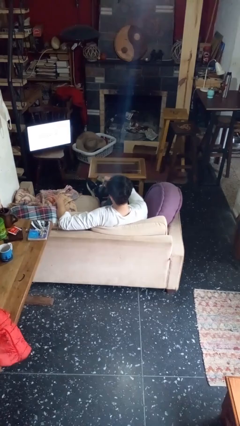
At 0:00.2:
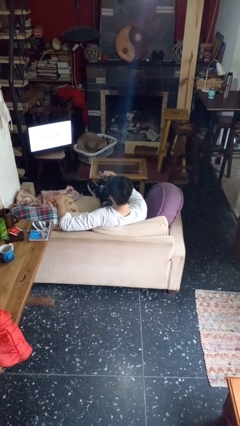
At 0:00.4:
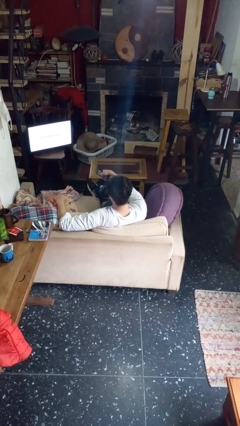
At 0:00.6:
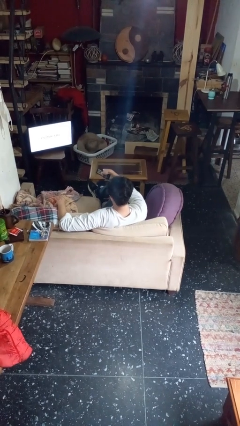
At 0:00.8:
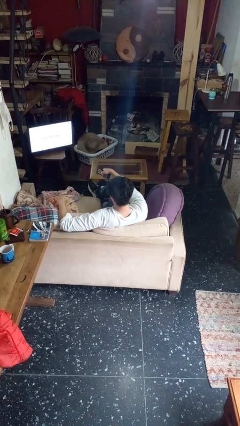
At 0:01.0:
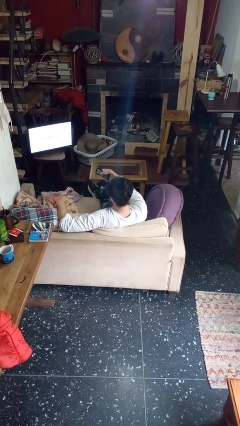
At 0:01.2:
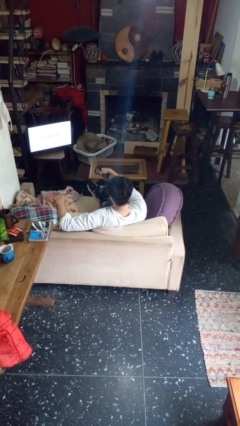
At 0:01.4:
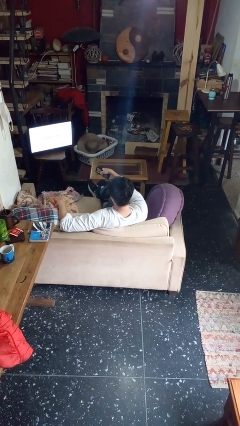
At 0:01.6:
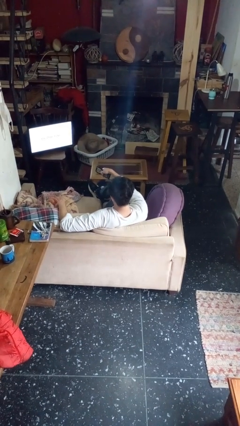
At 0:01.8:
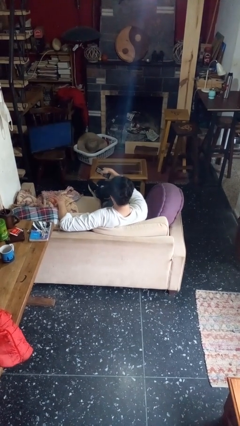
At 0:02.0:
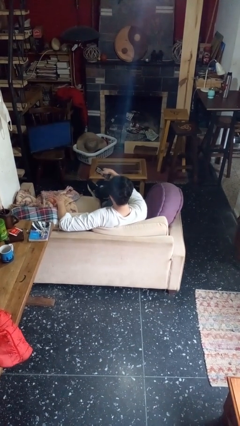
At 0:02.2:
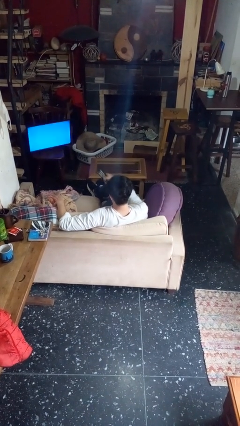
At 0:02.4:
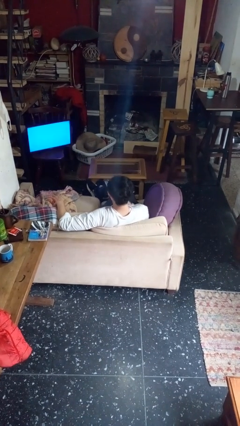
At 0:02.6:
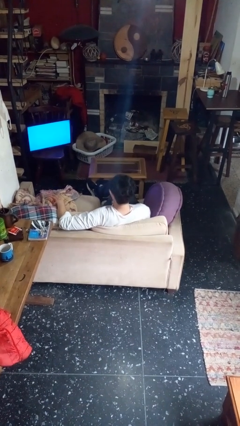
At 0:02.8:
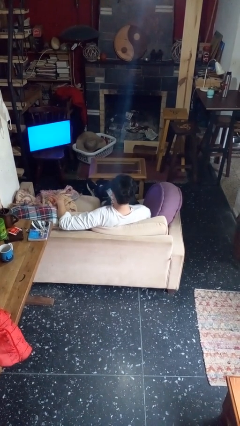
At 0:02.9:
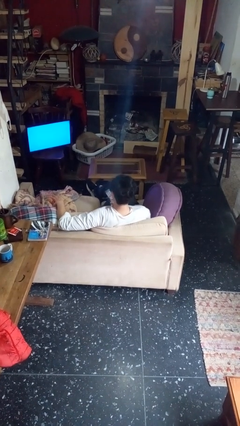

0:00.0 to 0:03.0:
person uses television remote

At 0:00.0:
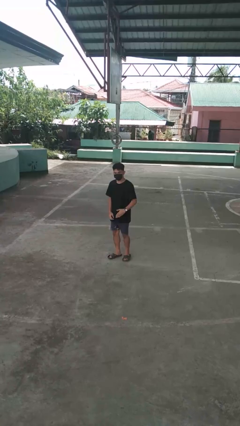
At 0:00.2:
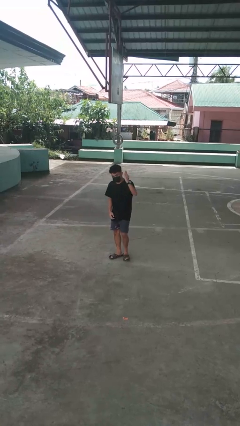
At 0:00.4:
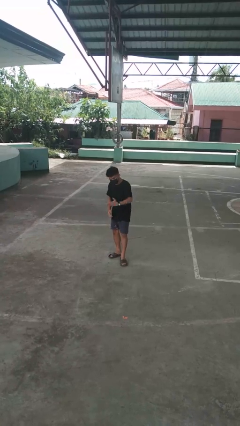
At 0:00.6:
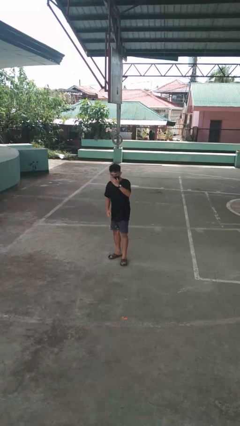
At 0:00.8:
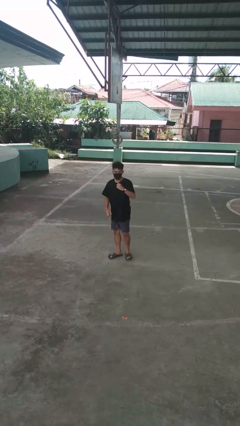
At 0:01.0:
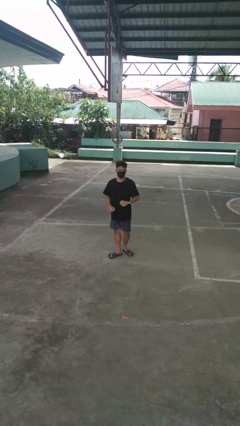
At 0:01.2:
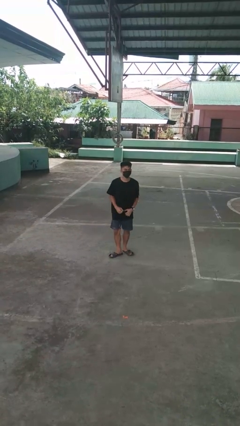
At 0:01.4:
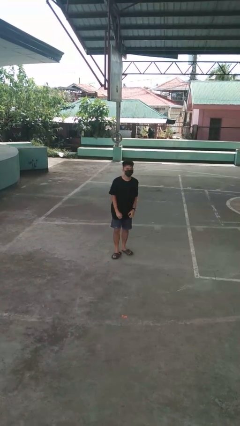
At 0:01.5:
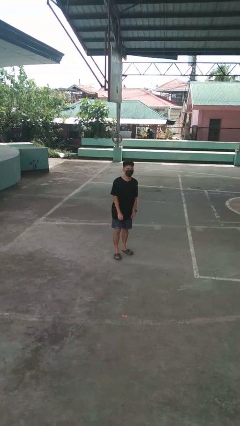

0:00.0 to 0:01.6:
person karate chop

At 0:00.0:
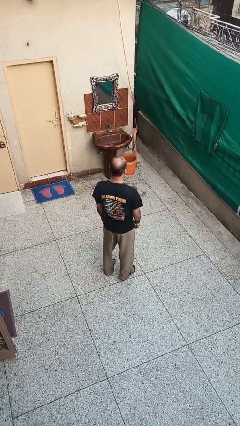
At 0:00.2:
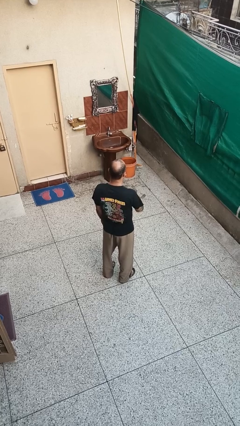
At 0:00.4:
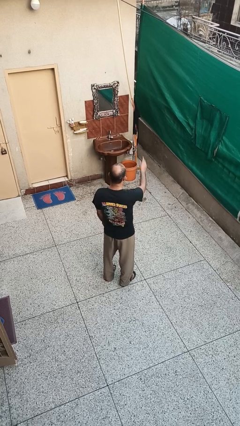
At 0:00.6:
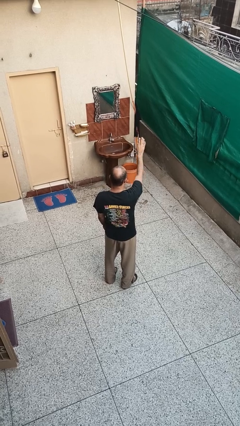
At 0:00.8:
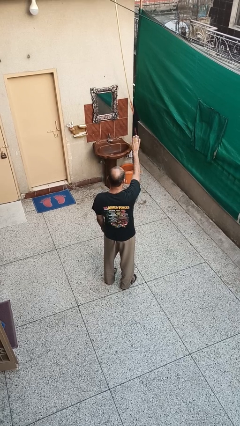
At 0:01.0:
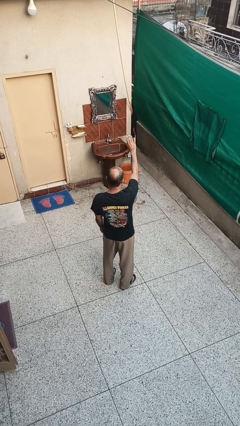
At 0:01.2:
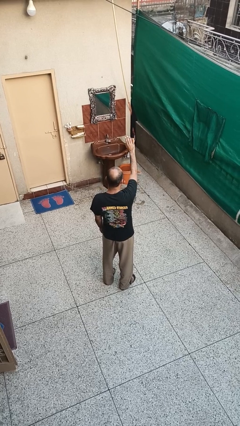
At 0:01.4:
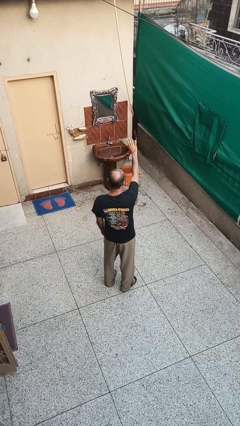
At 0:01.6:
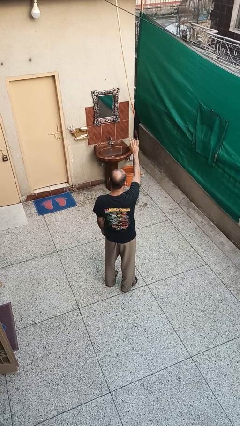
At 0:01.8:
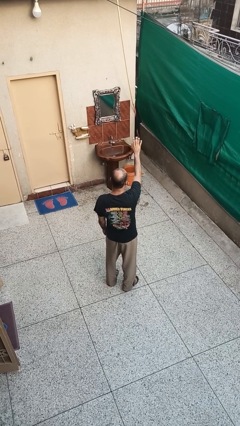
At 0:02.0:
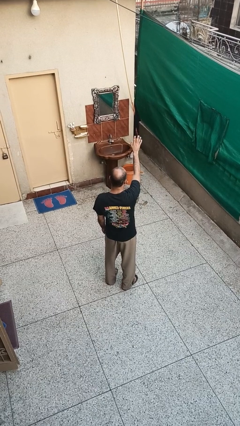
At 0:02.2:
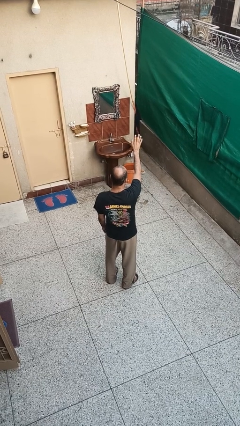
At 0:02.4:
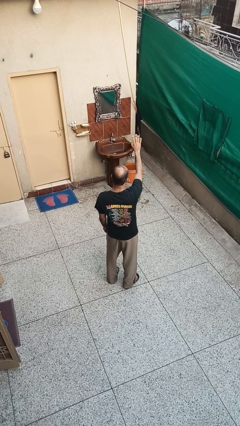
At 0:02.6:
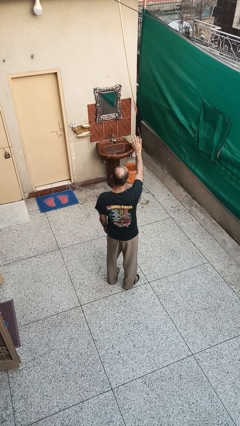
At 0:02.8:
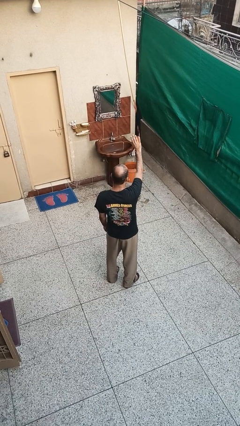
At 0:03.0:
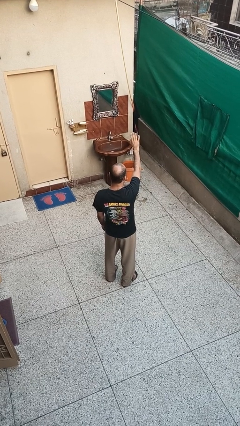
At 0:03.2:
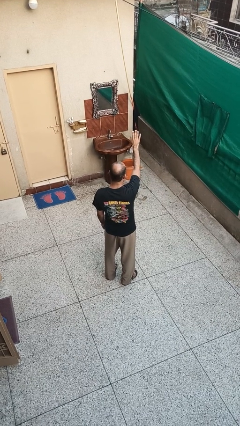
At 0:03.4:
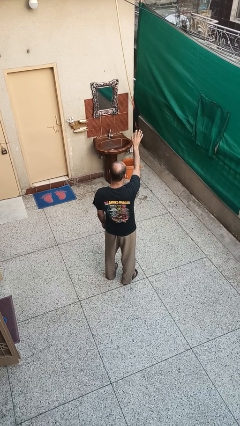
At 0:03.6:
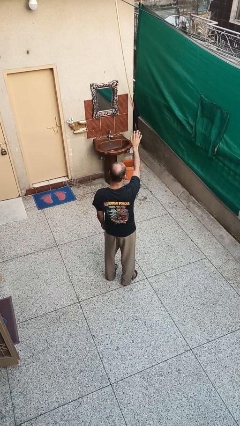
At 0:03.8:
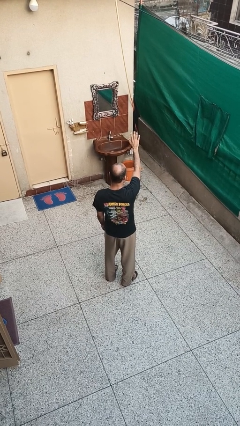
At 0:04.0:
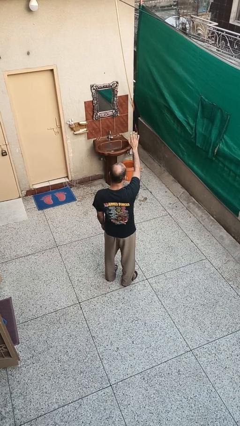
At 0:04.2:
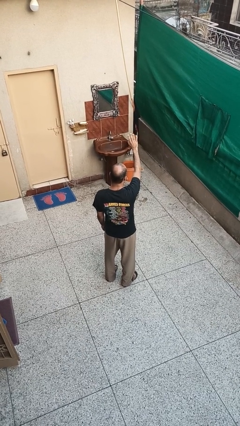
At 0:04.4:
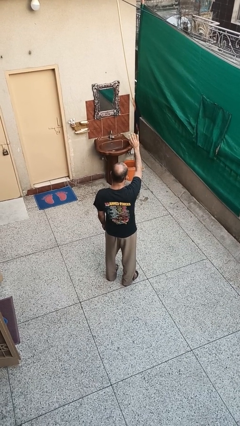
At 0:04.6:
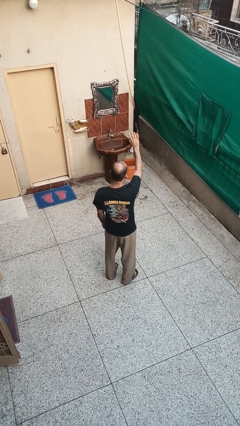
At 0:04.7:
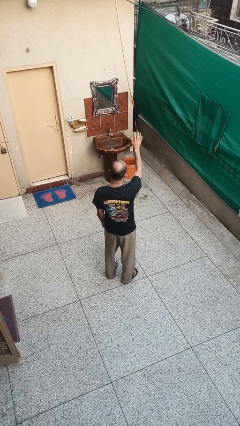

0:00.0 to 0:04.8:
person waves at person

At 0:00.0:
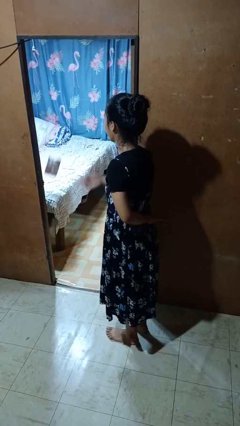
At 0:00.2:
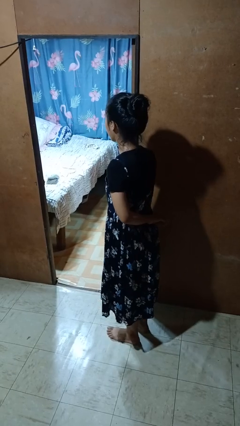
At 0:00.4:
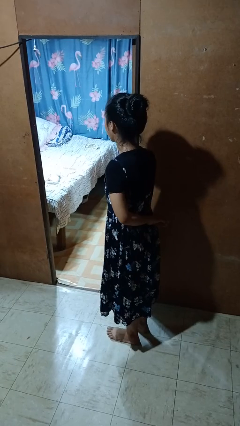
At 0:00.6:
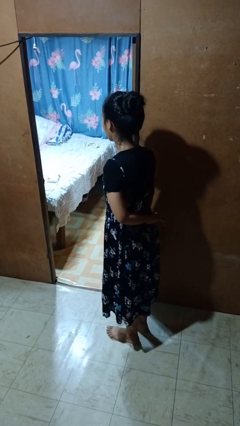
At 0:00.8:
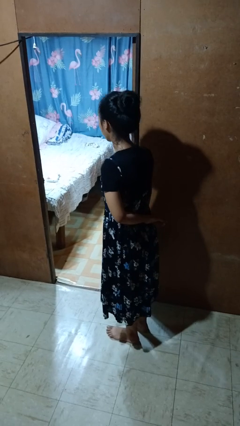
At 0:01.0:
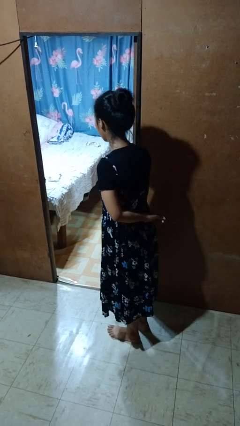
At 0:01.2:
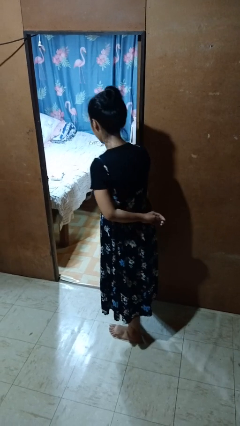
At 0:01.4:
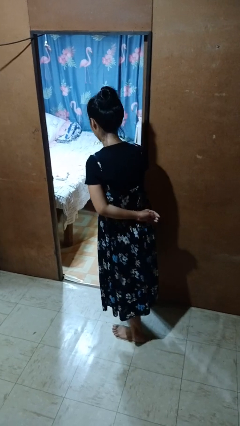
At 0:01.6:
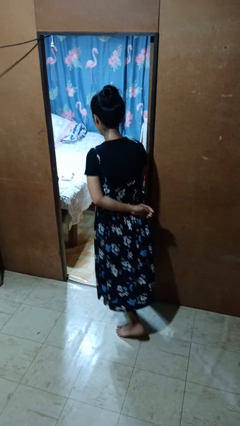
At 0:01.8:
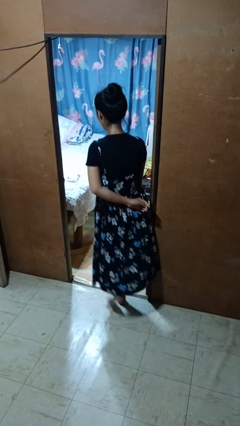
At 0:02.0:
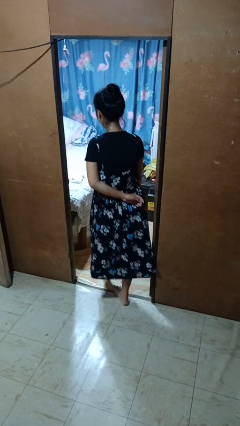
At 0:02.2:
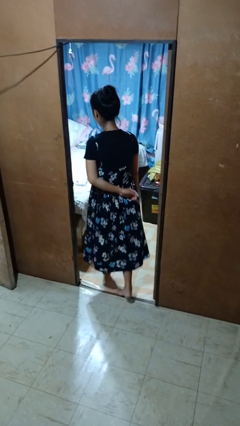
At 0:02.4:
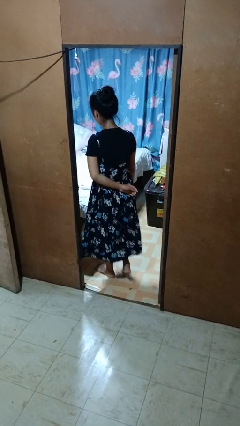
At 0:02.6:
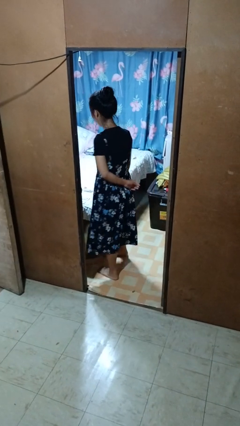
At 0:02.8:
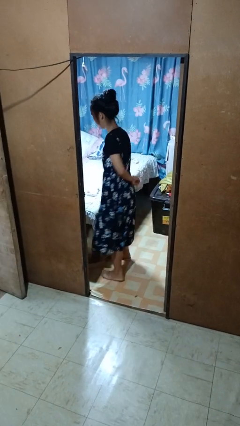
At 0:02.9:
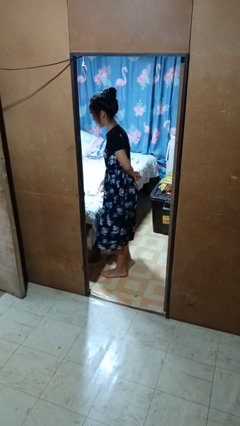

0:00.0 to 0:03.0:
person throws object on bed

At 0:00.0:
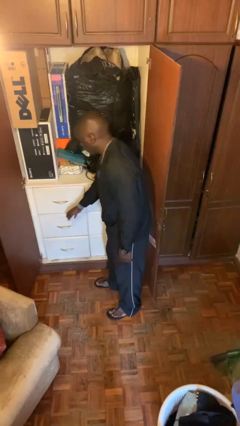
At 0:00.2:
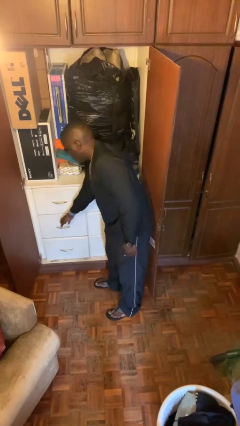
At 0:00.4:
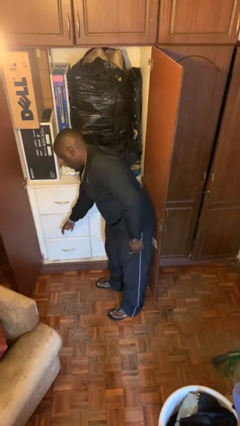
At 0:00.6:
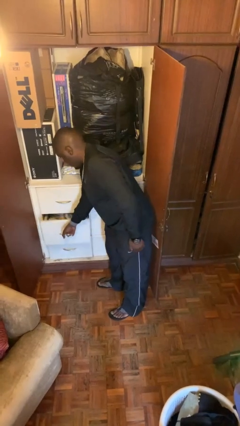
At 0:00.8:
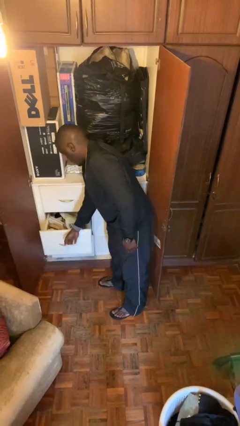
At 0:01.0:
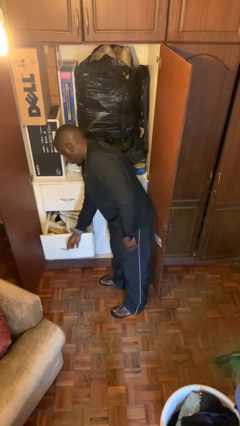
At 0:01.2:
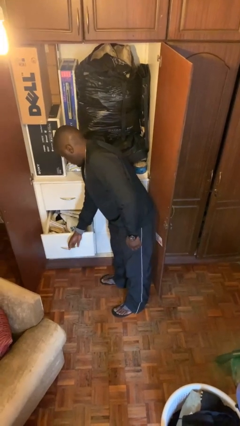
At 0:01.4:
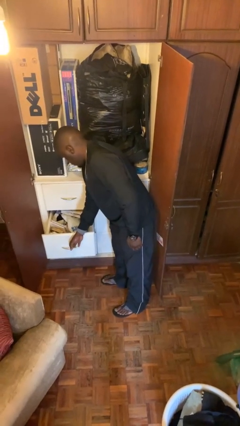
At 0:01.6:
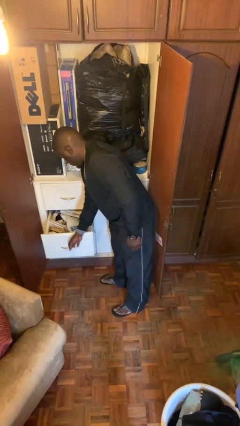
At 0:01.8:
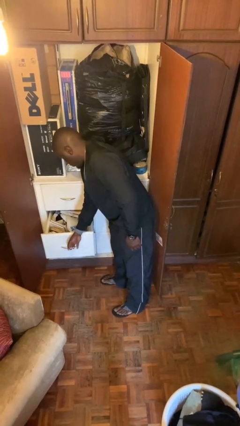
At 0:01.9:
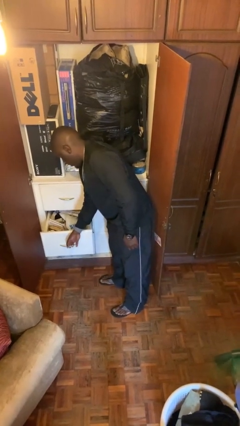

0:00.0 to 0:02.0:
person opens dresser drawer

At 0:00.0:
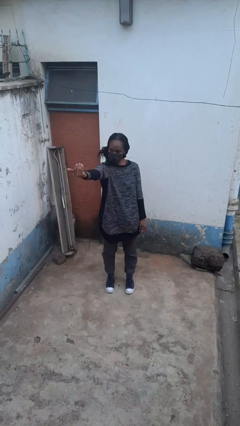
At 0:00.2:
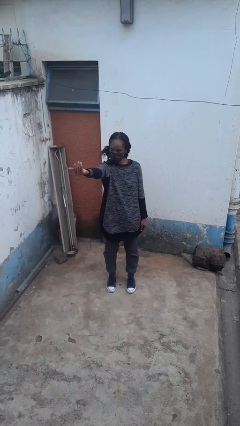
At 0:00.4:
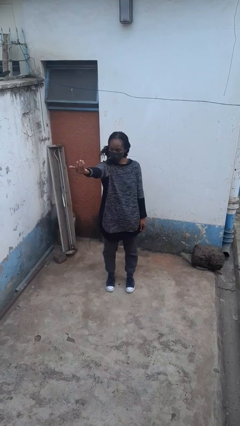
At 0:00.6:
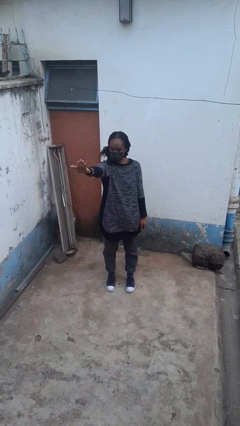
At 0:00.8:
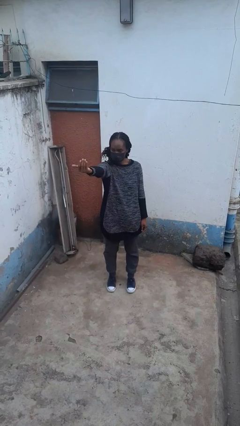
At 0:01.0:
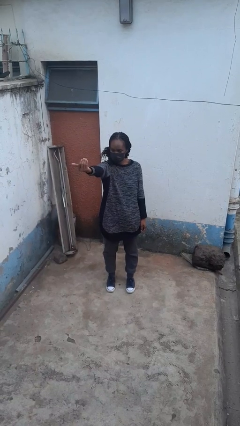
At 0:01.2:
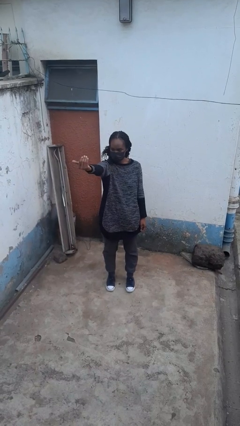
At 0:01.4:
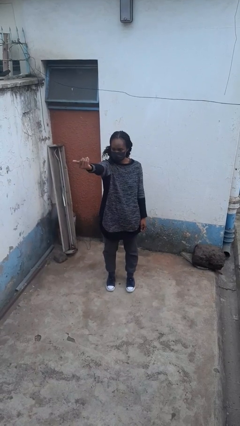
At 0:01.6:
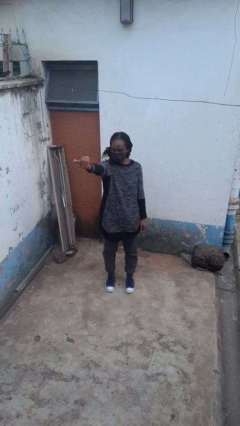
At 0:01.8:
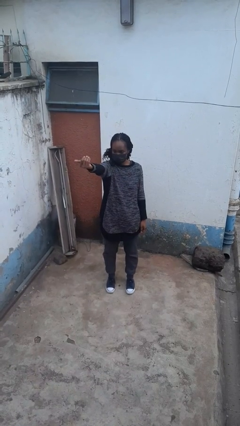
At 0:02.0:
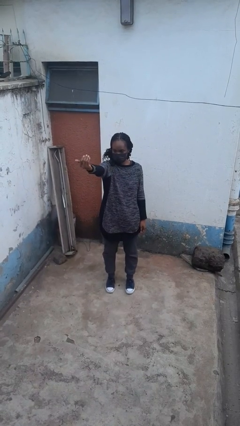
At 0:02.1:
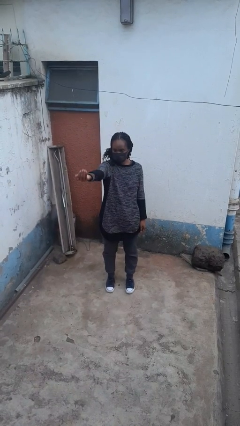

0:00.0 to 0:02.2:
person gestures come here

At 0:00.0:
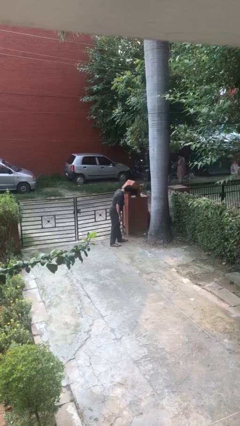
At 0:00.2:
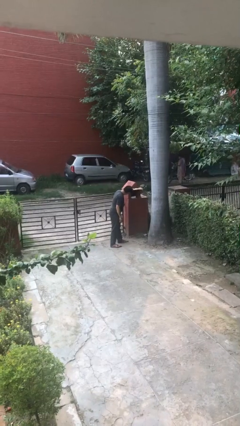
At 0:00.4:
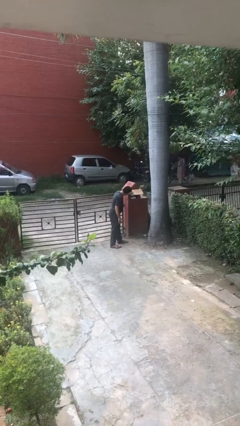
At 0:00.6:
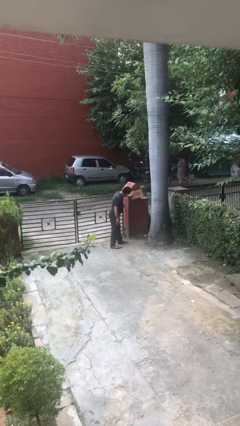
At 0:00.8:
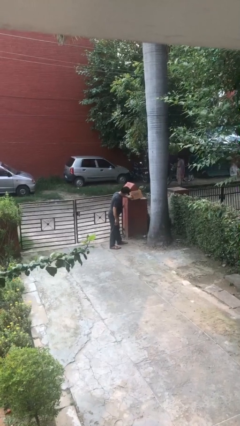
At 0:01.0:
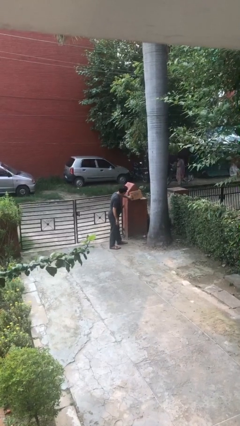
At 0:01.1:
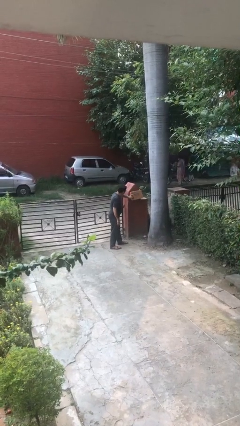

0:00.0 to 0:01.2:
person closes mailbox
